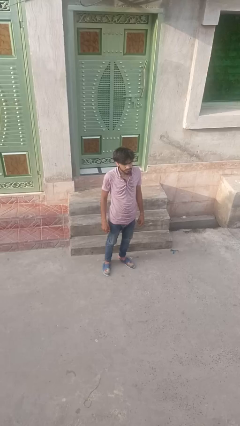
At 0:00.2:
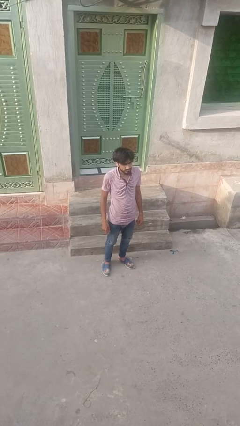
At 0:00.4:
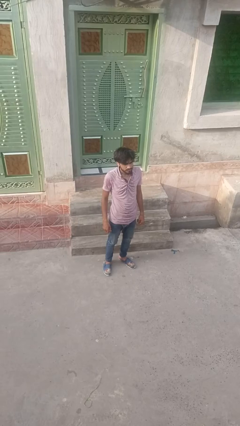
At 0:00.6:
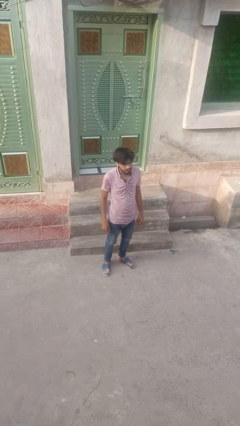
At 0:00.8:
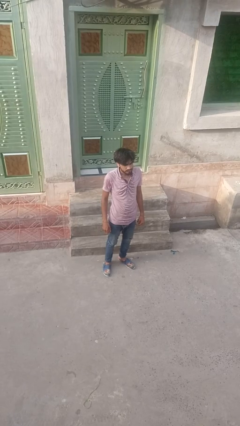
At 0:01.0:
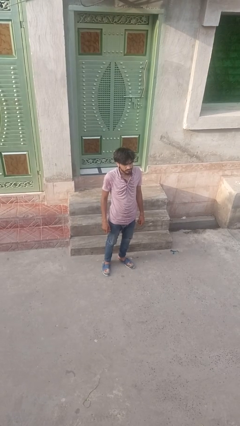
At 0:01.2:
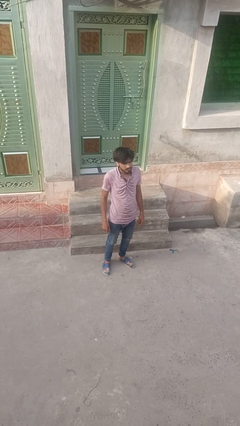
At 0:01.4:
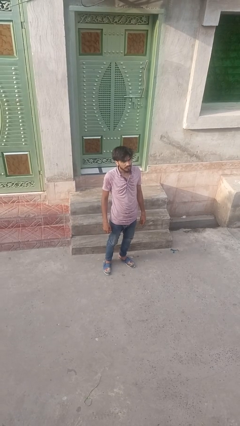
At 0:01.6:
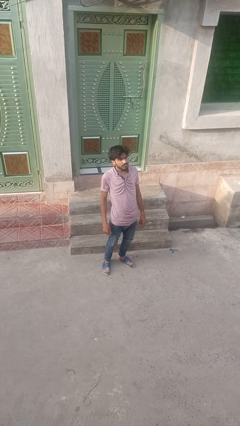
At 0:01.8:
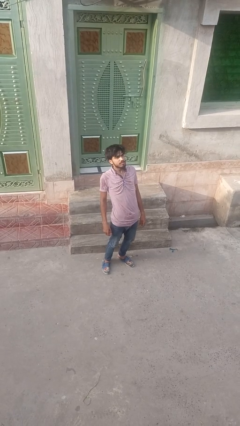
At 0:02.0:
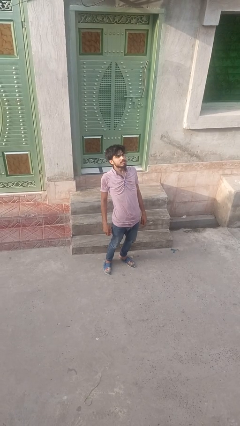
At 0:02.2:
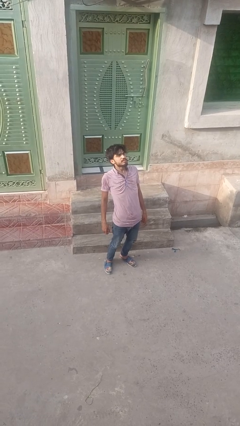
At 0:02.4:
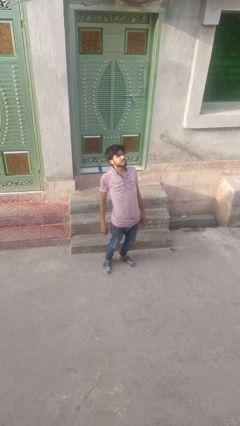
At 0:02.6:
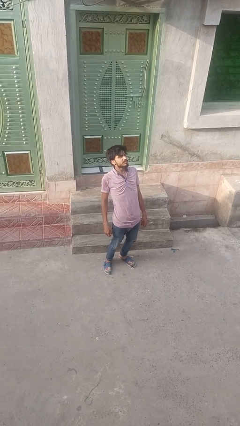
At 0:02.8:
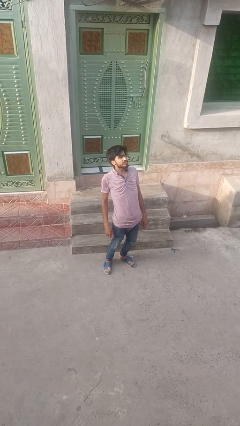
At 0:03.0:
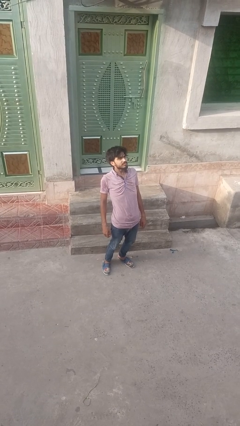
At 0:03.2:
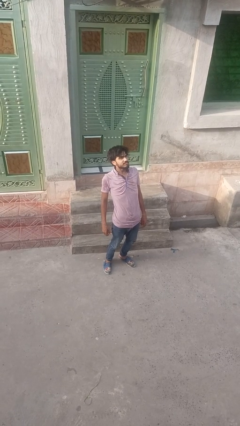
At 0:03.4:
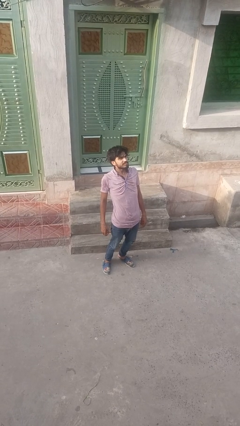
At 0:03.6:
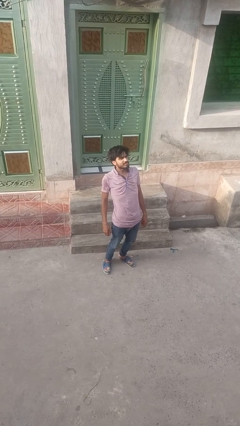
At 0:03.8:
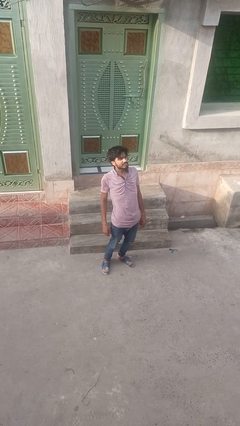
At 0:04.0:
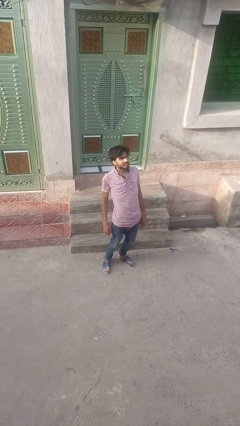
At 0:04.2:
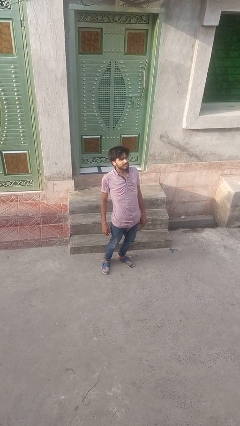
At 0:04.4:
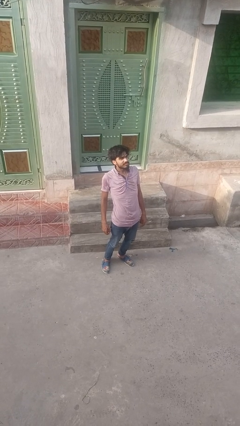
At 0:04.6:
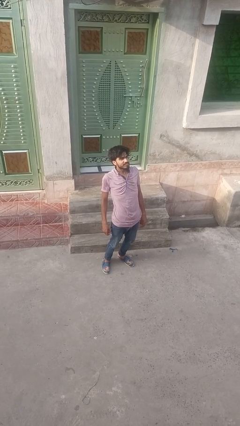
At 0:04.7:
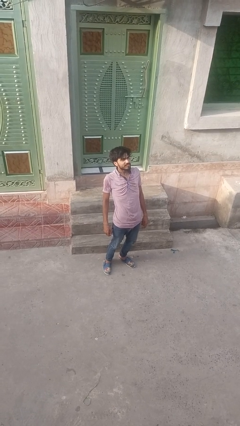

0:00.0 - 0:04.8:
person stretches back

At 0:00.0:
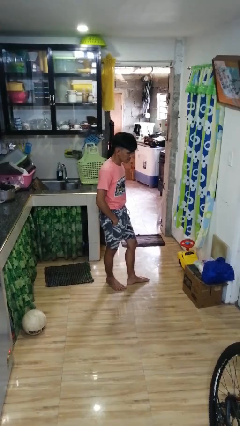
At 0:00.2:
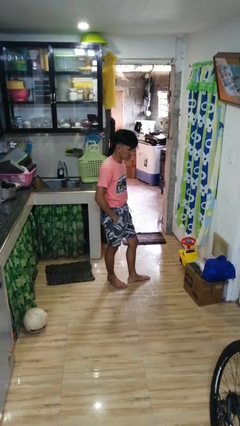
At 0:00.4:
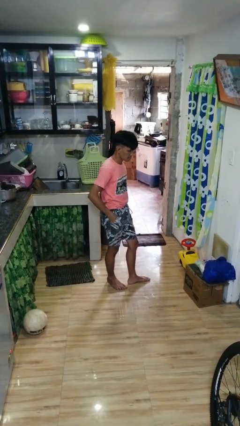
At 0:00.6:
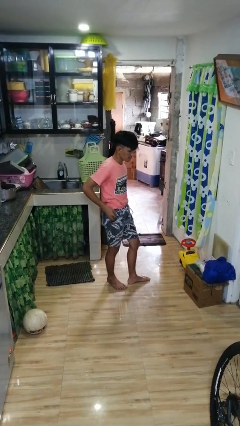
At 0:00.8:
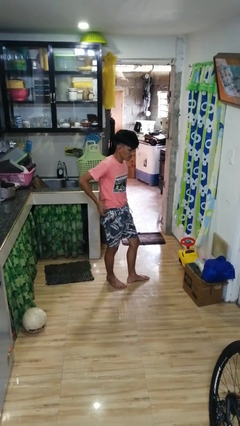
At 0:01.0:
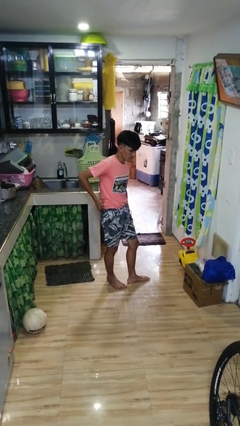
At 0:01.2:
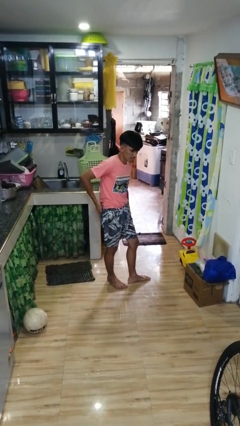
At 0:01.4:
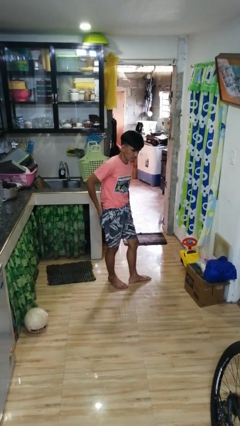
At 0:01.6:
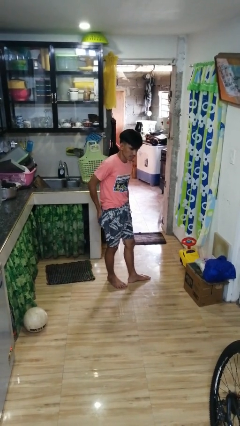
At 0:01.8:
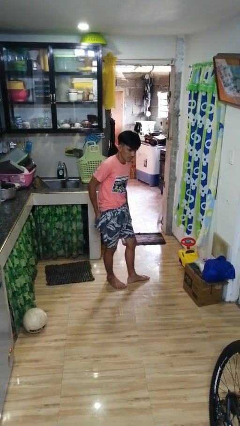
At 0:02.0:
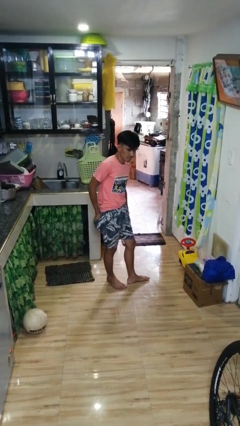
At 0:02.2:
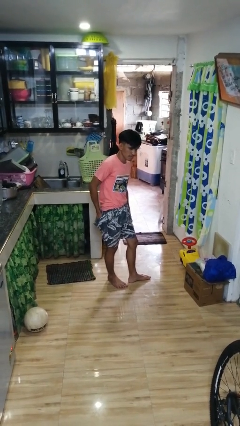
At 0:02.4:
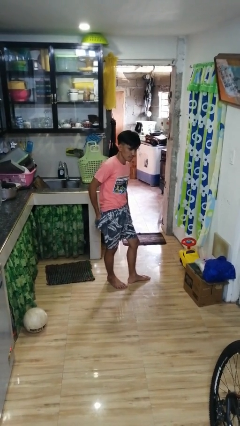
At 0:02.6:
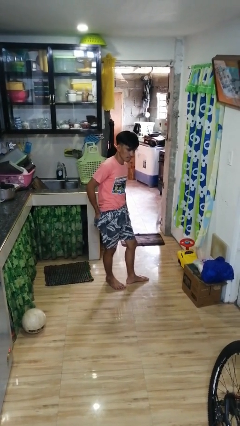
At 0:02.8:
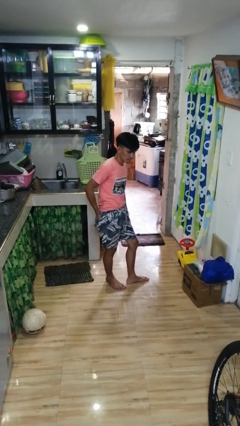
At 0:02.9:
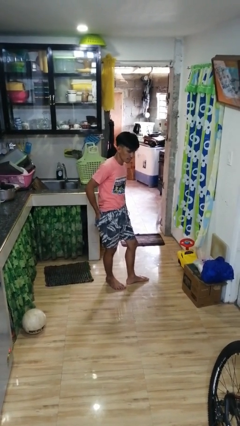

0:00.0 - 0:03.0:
person puts hands in back pockets

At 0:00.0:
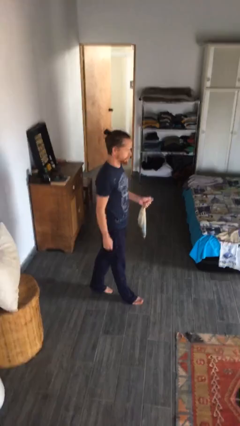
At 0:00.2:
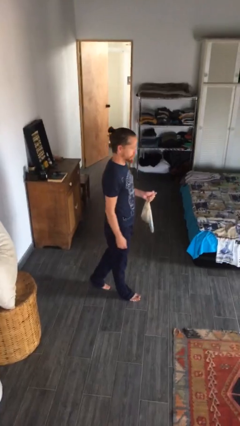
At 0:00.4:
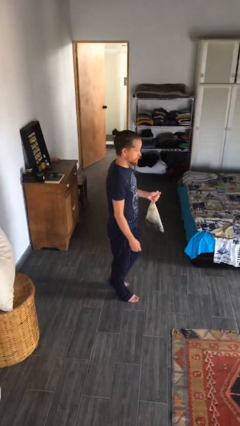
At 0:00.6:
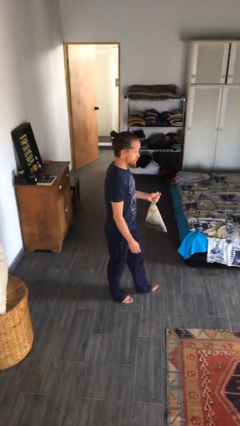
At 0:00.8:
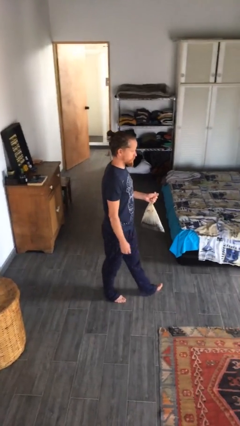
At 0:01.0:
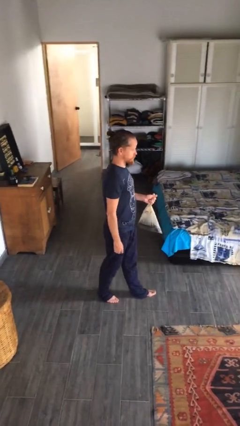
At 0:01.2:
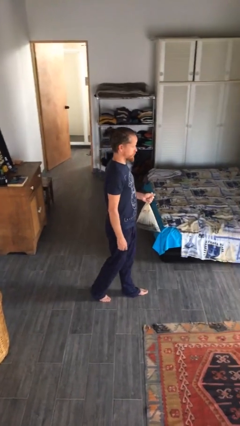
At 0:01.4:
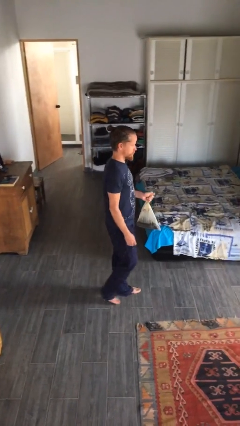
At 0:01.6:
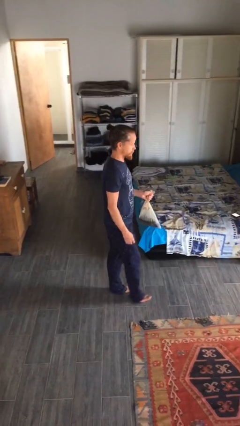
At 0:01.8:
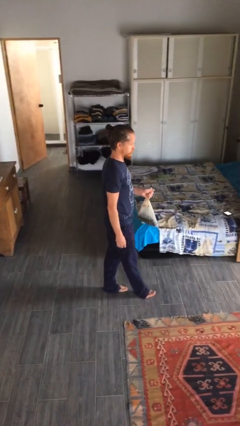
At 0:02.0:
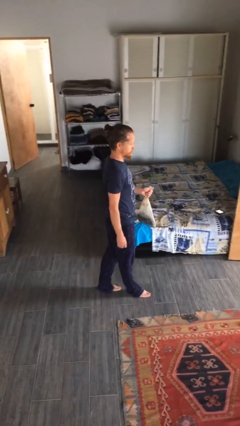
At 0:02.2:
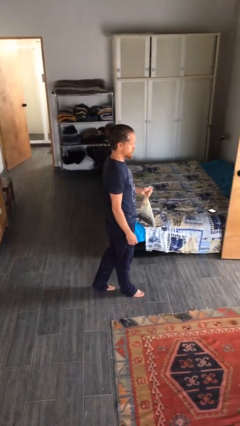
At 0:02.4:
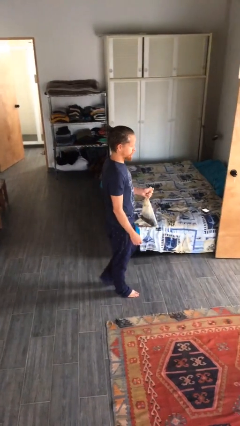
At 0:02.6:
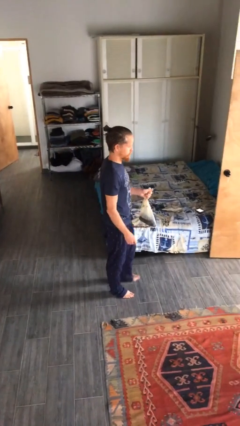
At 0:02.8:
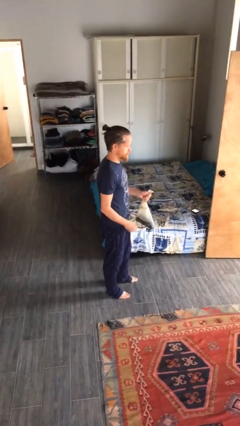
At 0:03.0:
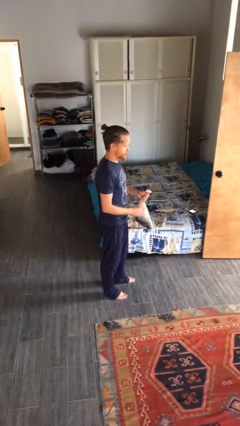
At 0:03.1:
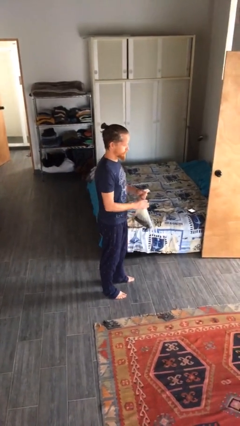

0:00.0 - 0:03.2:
person carries groceries

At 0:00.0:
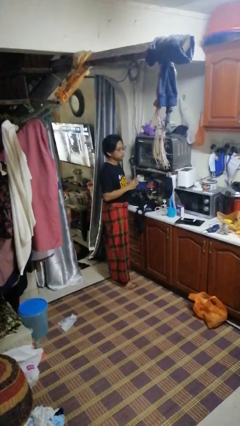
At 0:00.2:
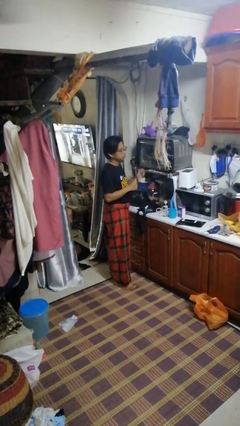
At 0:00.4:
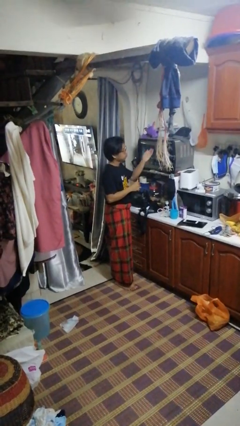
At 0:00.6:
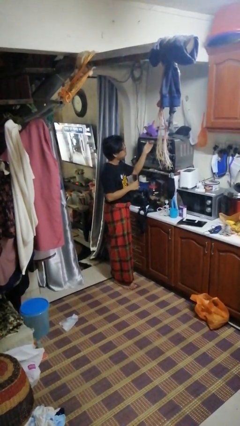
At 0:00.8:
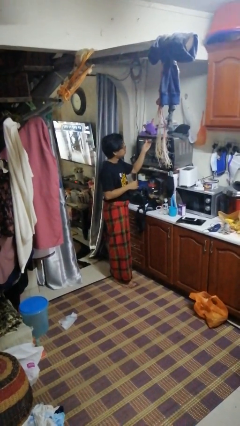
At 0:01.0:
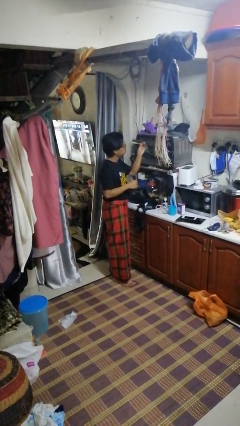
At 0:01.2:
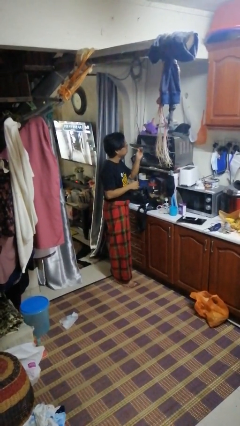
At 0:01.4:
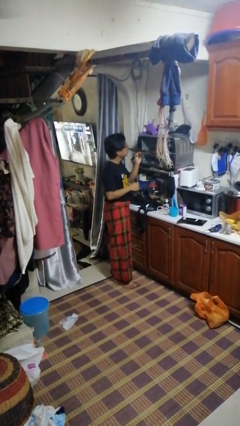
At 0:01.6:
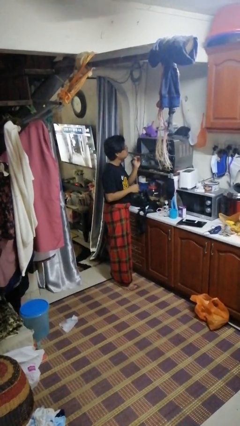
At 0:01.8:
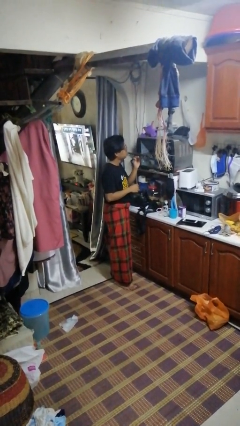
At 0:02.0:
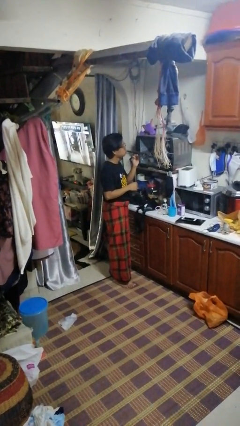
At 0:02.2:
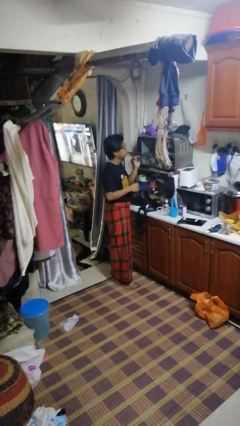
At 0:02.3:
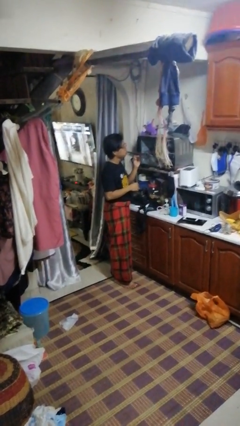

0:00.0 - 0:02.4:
person opens oven door

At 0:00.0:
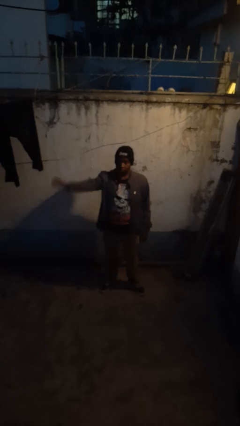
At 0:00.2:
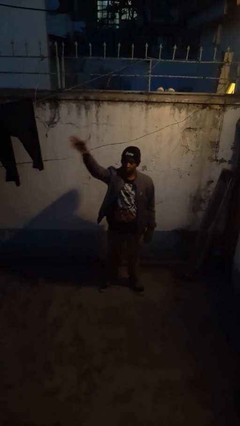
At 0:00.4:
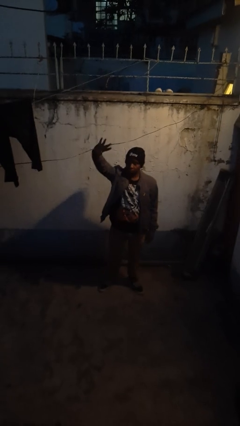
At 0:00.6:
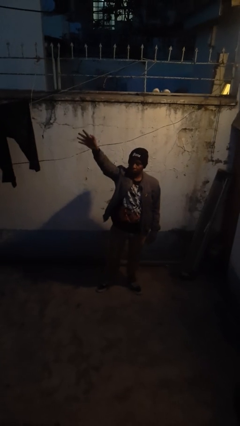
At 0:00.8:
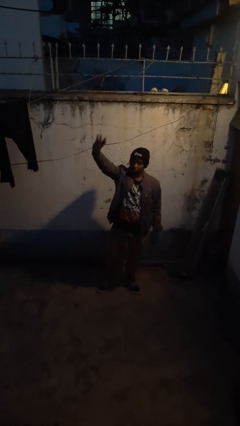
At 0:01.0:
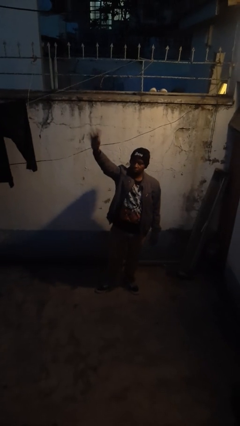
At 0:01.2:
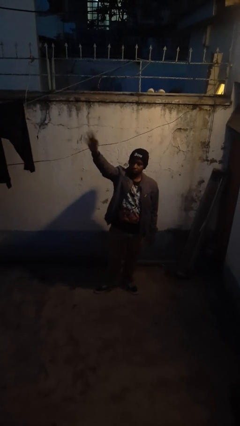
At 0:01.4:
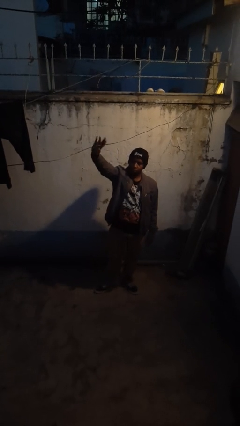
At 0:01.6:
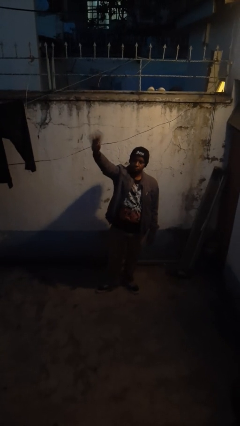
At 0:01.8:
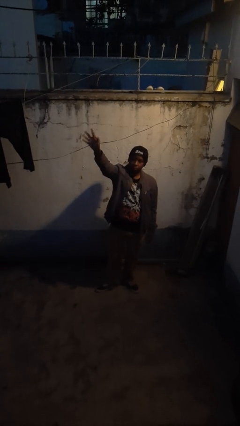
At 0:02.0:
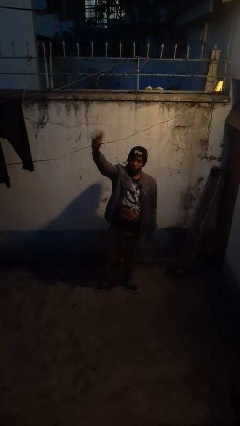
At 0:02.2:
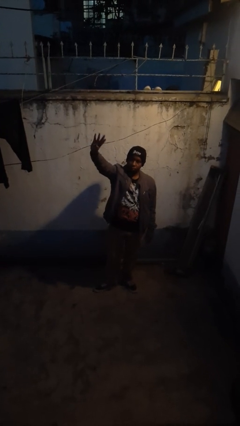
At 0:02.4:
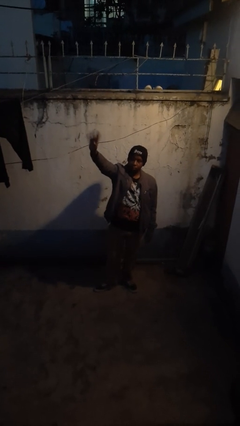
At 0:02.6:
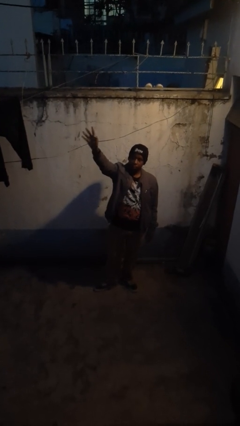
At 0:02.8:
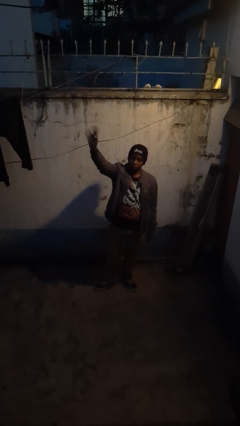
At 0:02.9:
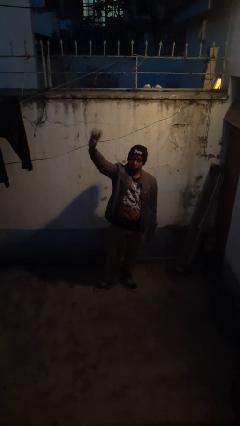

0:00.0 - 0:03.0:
person waves at person

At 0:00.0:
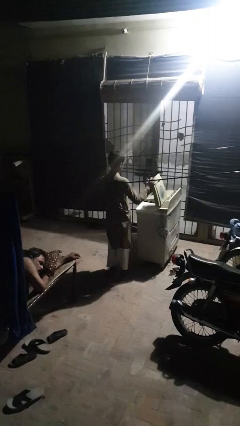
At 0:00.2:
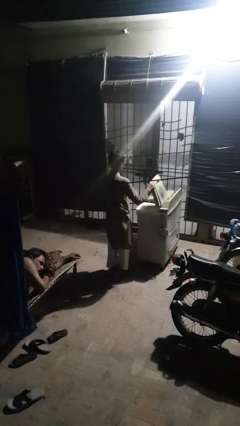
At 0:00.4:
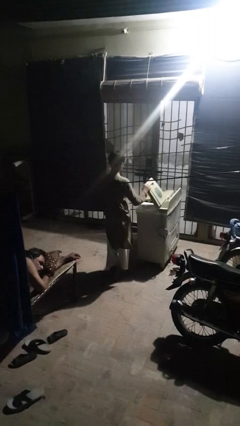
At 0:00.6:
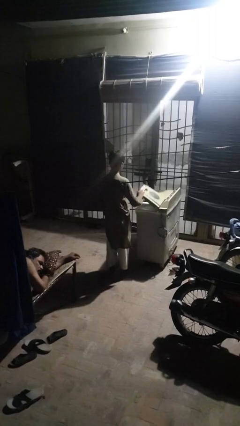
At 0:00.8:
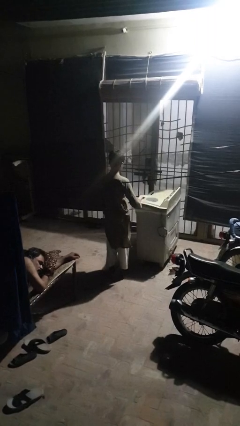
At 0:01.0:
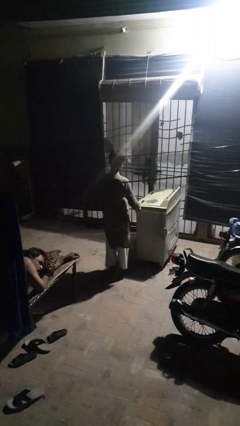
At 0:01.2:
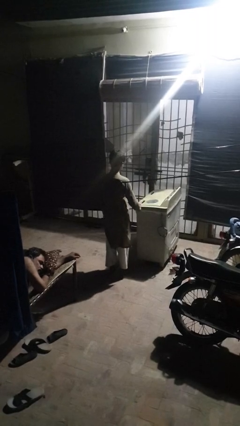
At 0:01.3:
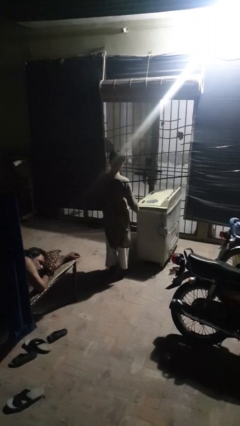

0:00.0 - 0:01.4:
person closes clothes washer
